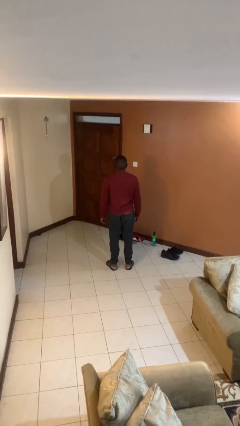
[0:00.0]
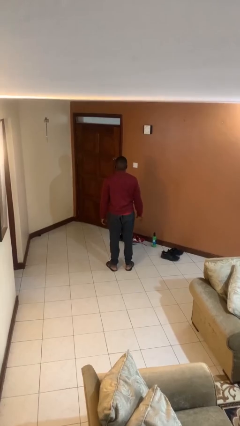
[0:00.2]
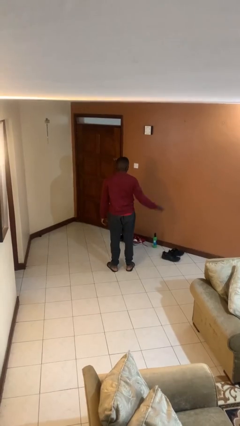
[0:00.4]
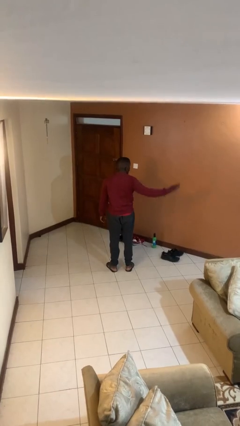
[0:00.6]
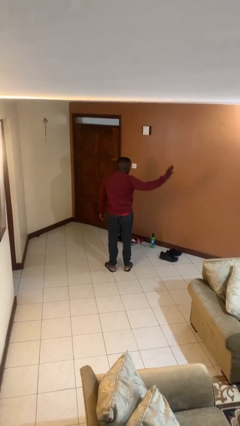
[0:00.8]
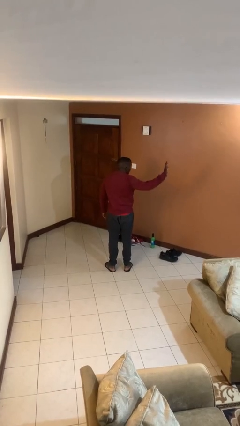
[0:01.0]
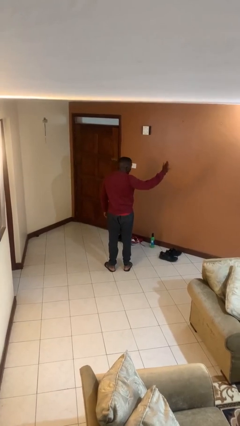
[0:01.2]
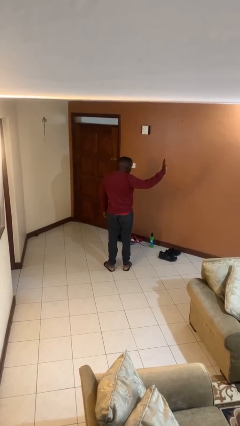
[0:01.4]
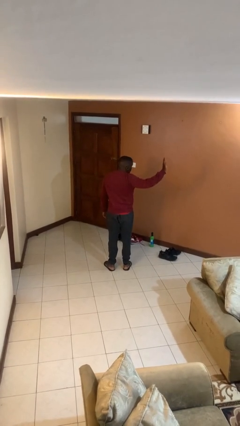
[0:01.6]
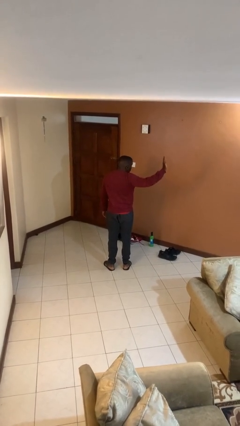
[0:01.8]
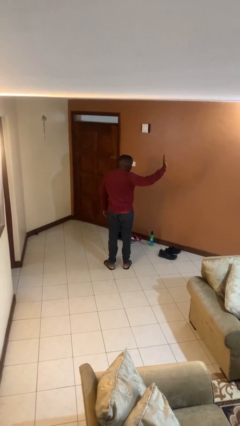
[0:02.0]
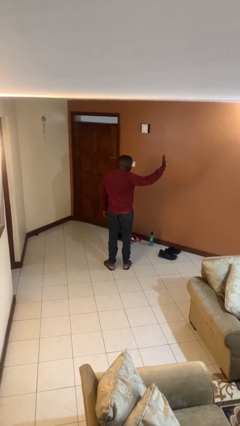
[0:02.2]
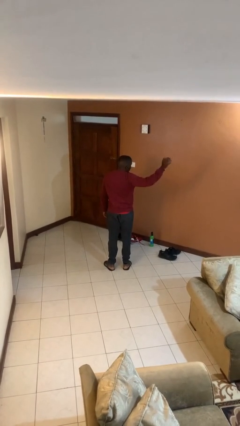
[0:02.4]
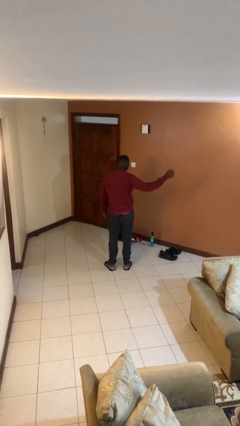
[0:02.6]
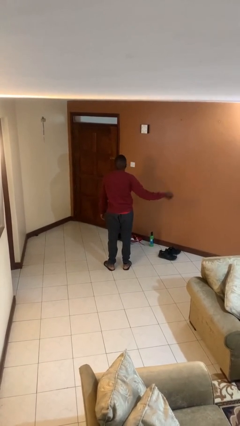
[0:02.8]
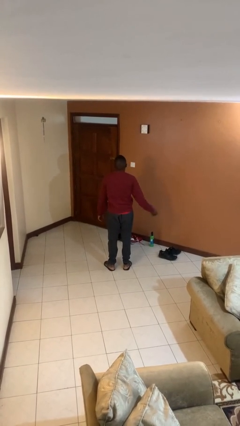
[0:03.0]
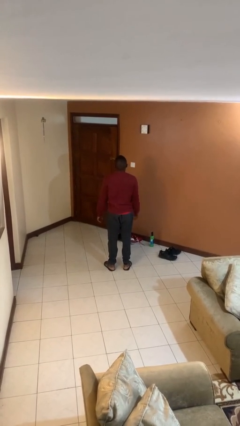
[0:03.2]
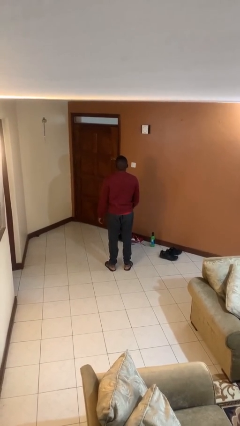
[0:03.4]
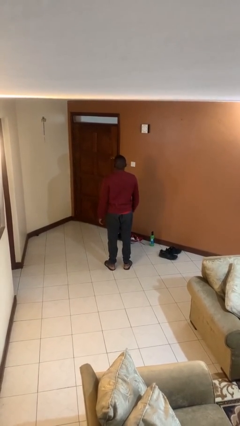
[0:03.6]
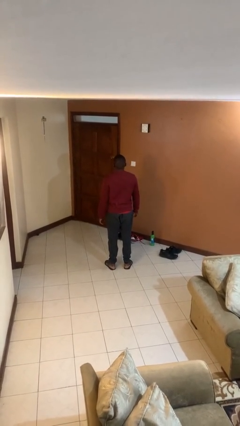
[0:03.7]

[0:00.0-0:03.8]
person waves at person

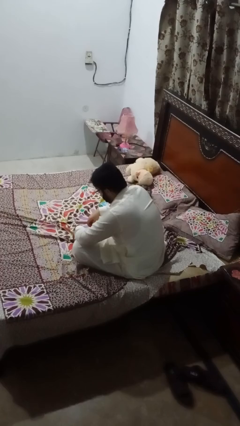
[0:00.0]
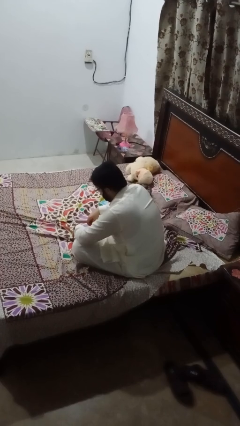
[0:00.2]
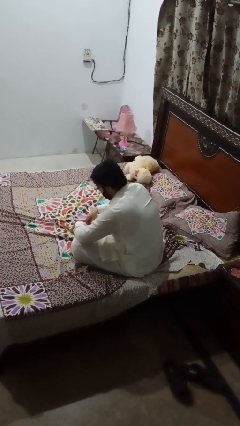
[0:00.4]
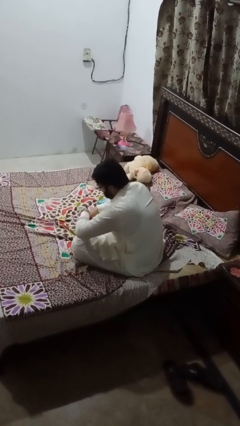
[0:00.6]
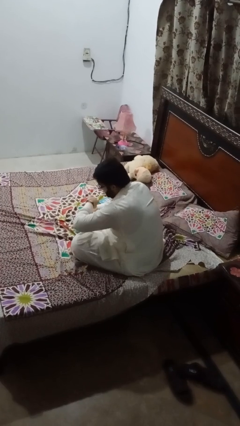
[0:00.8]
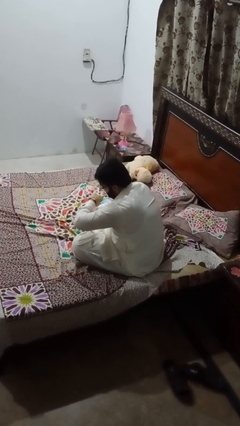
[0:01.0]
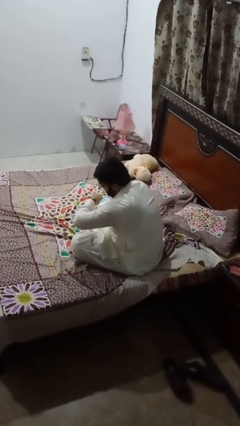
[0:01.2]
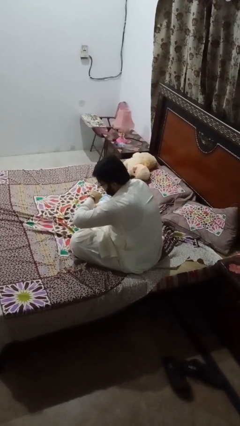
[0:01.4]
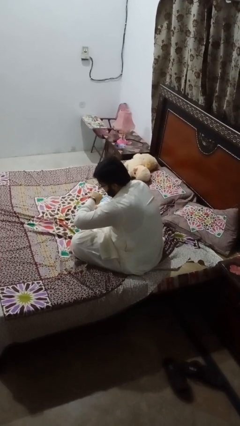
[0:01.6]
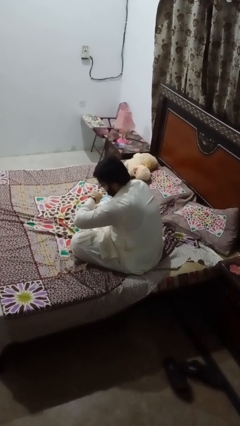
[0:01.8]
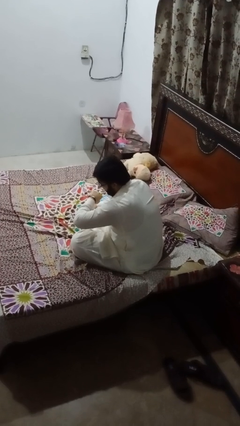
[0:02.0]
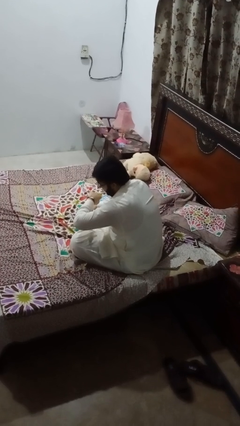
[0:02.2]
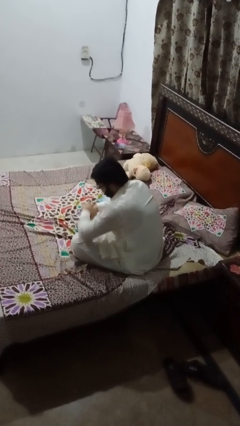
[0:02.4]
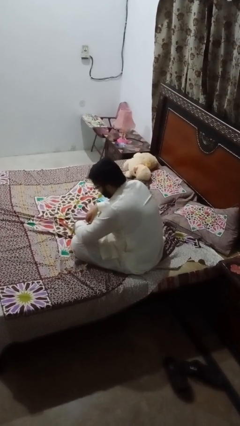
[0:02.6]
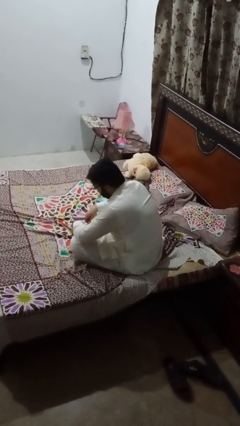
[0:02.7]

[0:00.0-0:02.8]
person looks at wristwatch

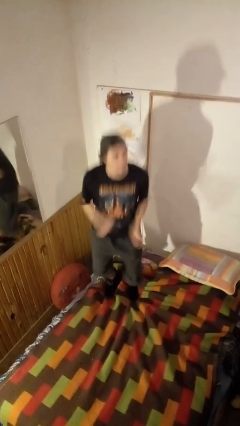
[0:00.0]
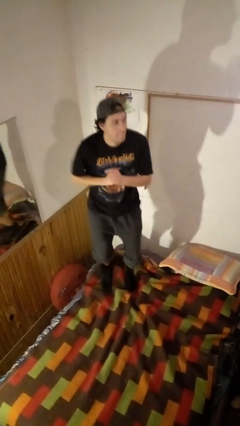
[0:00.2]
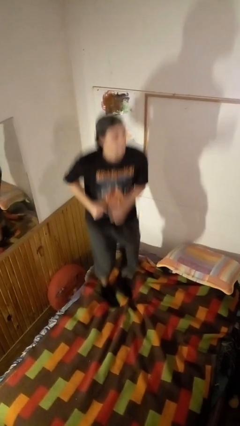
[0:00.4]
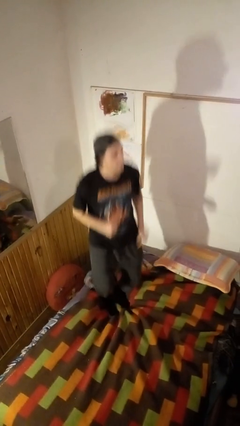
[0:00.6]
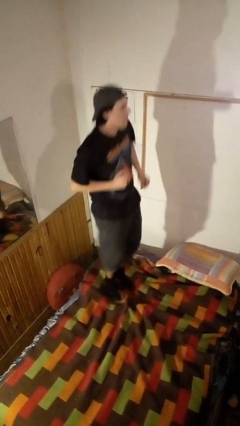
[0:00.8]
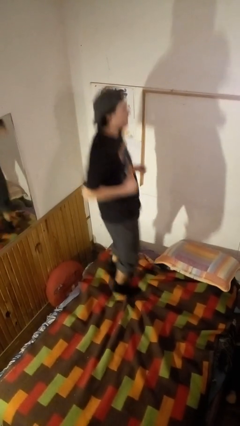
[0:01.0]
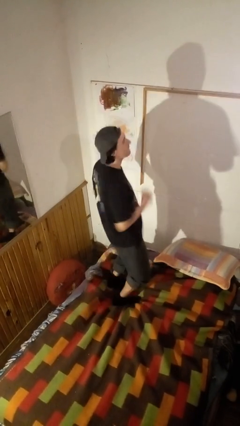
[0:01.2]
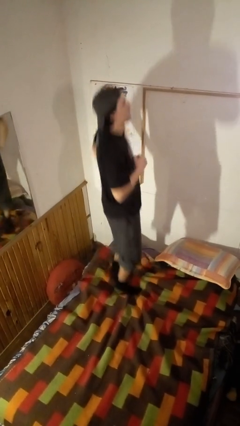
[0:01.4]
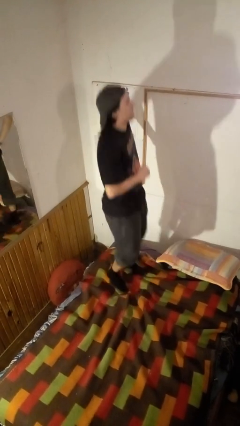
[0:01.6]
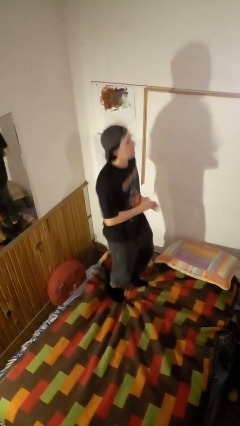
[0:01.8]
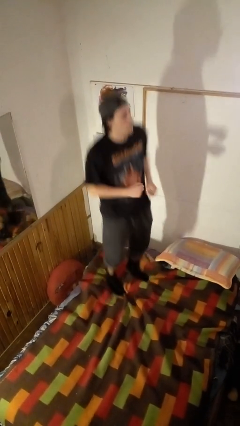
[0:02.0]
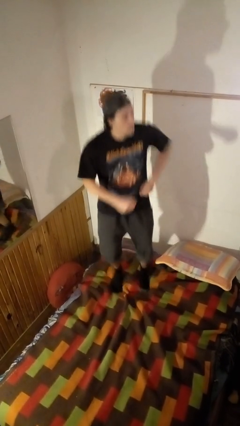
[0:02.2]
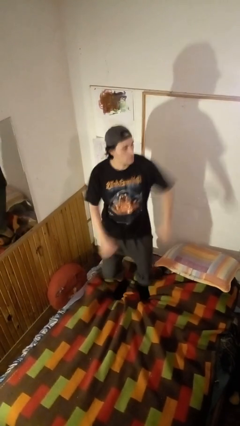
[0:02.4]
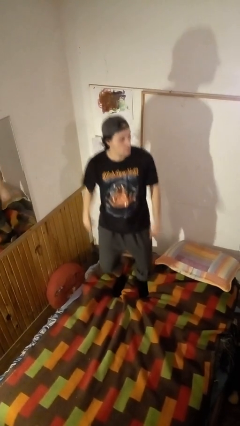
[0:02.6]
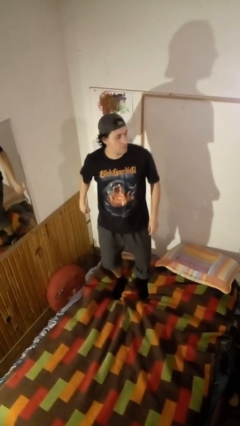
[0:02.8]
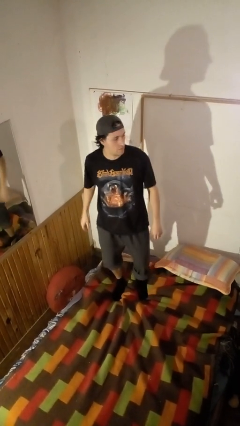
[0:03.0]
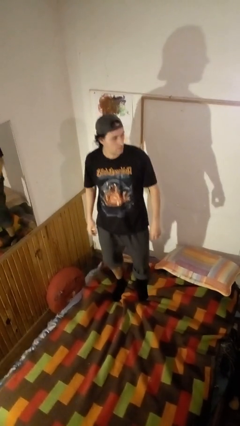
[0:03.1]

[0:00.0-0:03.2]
person jumps on bed

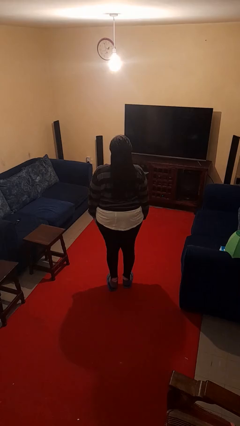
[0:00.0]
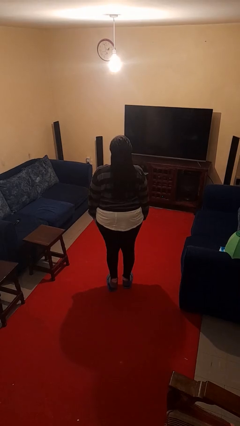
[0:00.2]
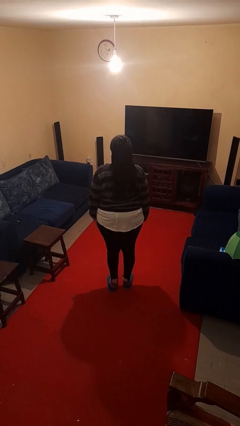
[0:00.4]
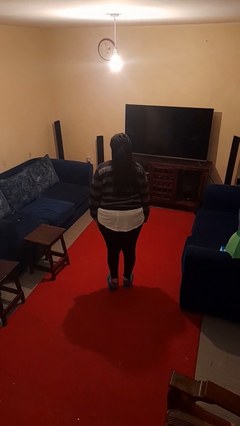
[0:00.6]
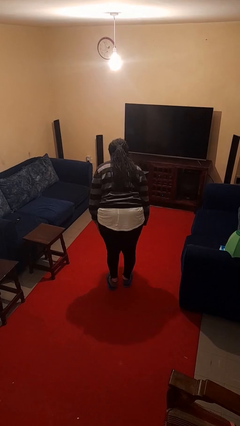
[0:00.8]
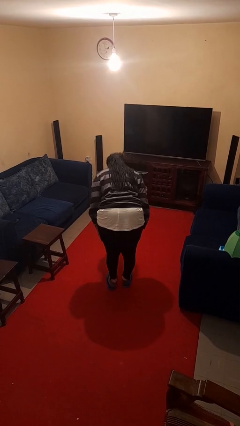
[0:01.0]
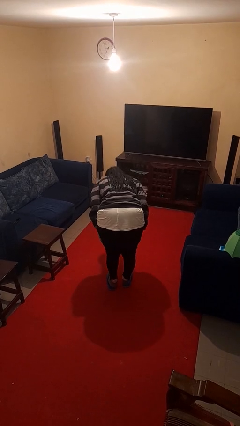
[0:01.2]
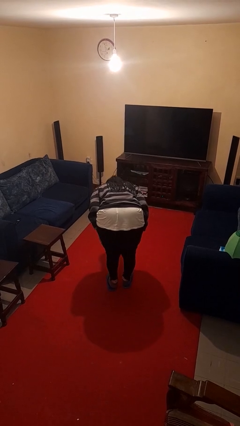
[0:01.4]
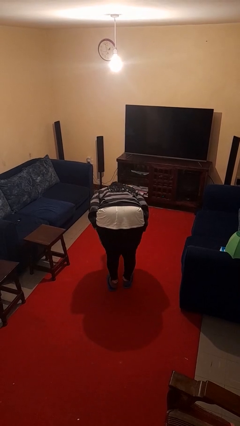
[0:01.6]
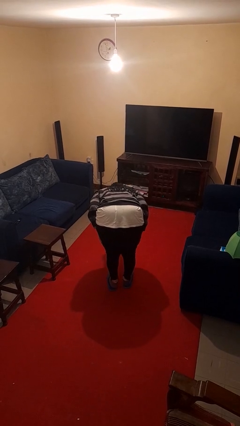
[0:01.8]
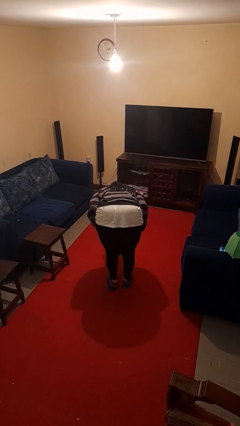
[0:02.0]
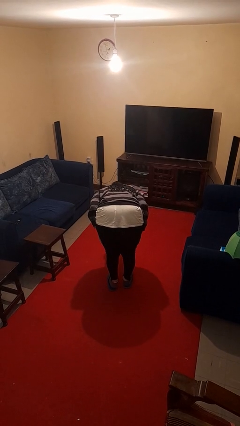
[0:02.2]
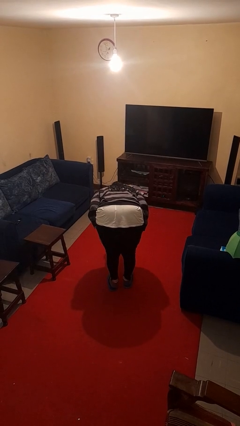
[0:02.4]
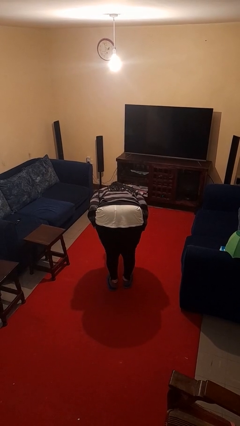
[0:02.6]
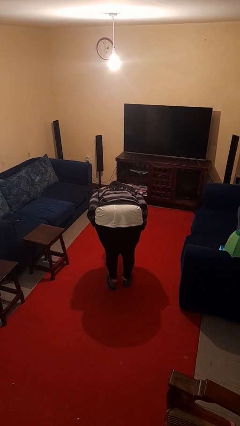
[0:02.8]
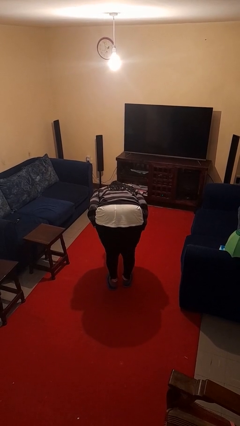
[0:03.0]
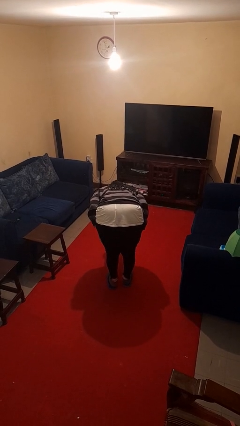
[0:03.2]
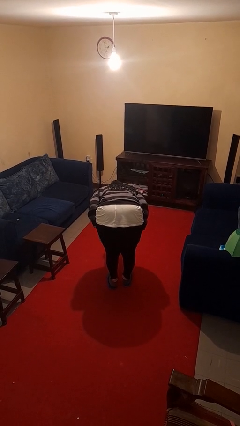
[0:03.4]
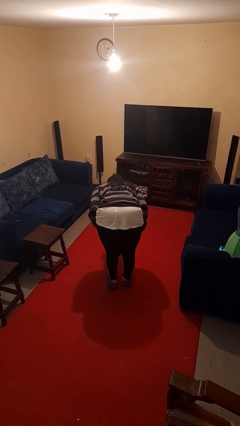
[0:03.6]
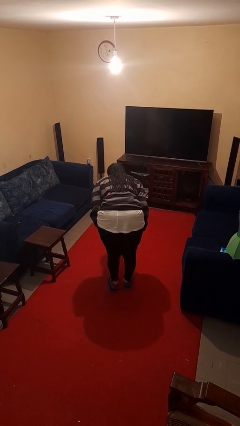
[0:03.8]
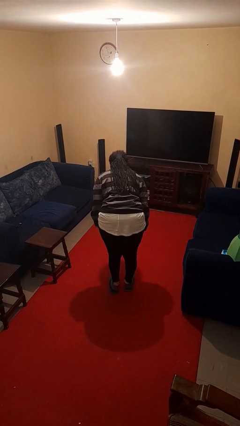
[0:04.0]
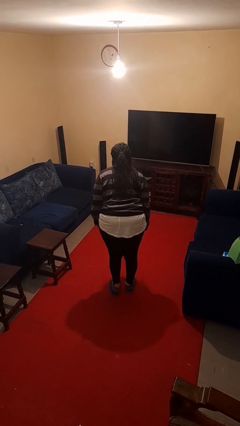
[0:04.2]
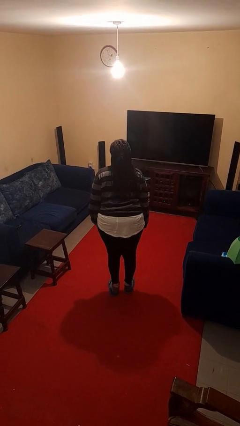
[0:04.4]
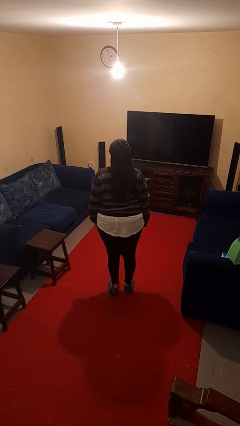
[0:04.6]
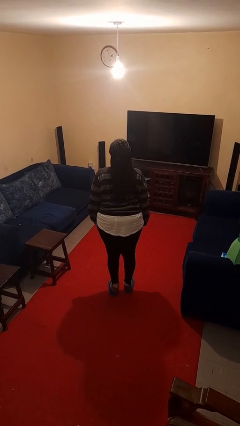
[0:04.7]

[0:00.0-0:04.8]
person bows

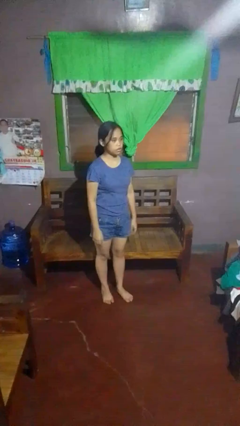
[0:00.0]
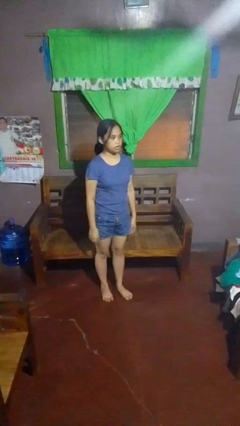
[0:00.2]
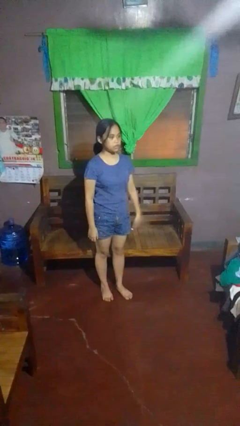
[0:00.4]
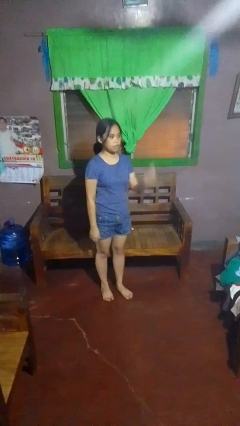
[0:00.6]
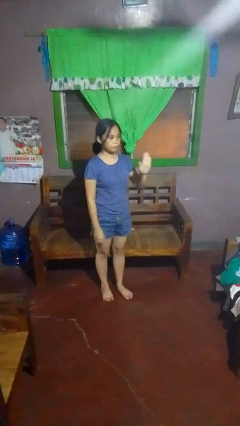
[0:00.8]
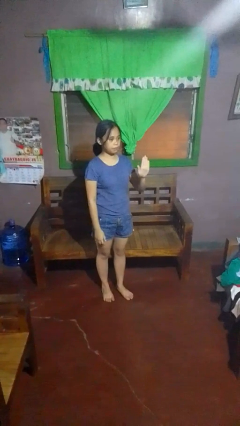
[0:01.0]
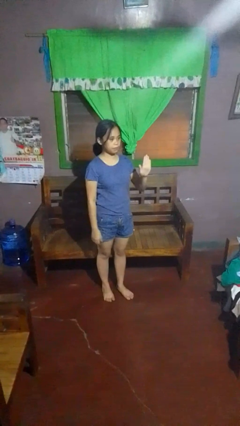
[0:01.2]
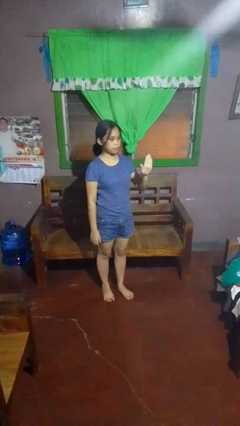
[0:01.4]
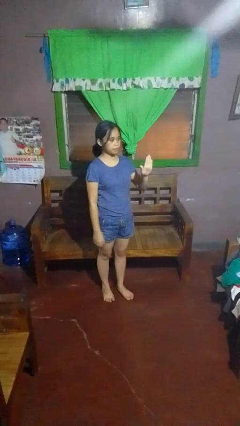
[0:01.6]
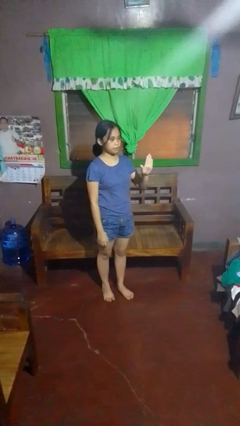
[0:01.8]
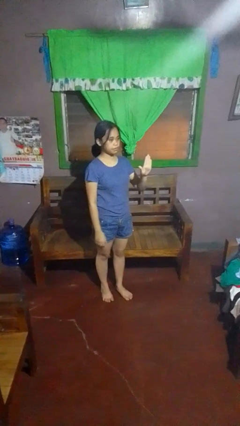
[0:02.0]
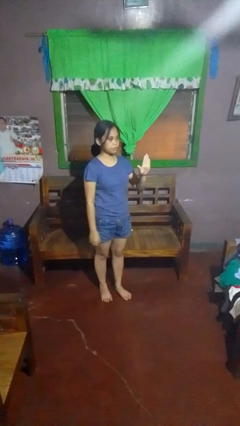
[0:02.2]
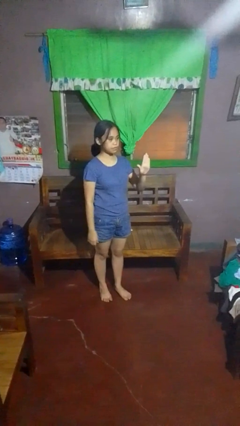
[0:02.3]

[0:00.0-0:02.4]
person gestures stop

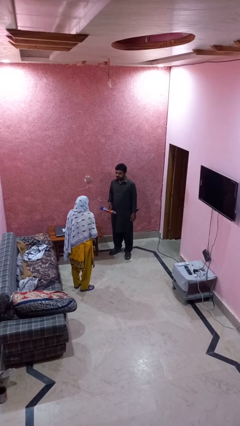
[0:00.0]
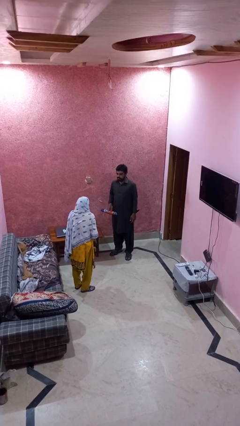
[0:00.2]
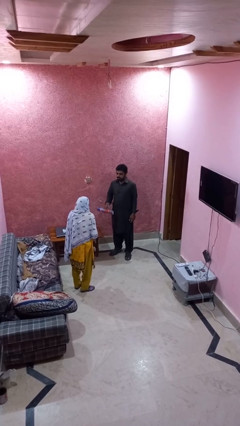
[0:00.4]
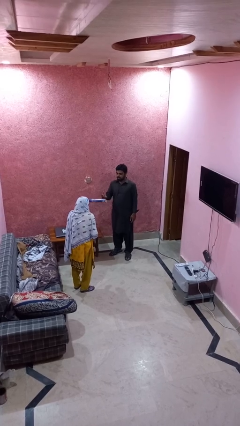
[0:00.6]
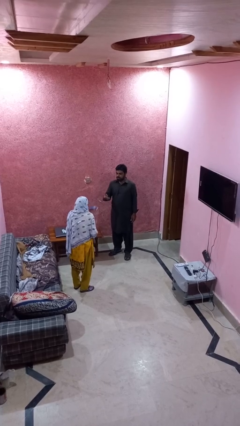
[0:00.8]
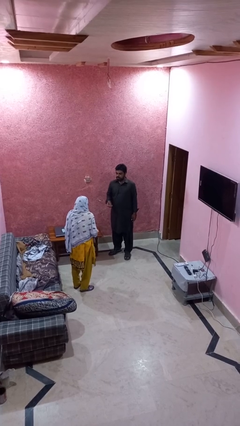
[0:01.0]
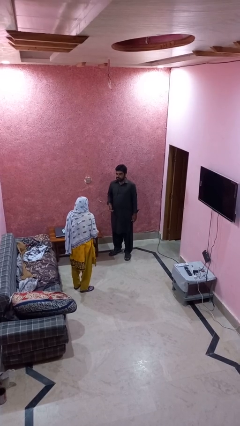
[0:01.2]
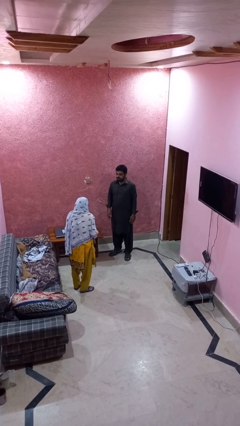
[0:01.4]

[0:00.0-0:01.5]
person throws object to person
